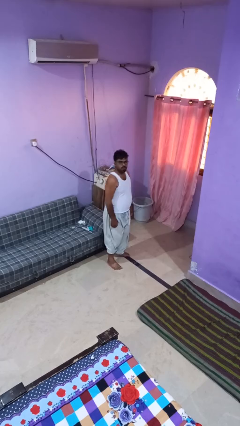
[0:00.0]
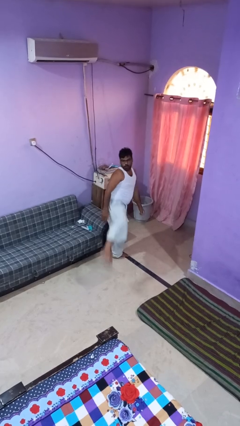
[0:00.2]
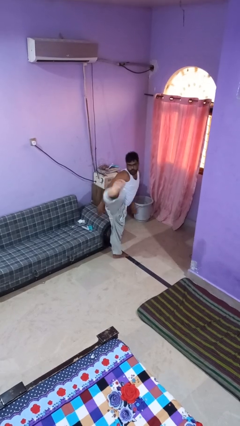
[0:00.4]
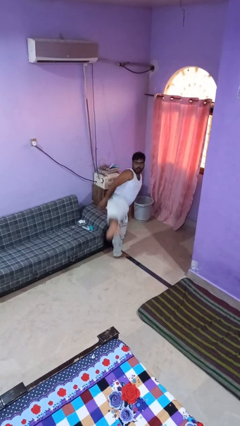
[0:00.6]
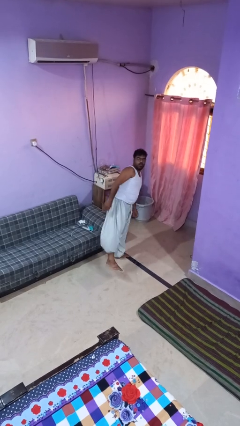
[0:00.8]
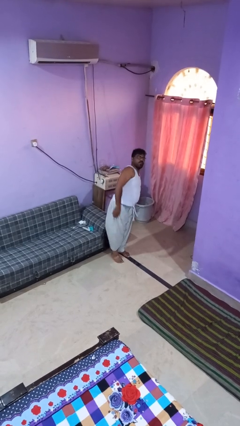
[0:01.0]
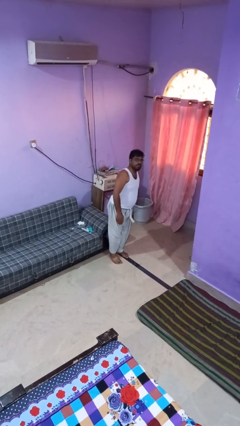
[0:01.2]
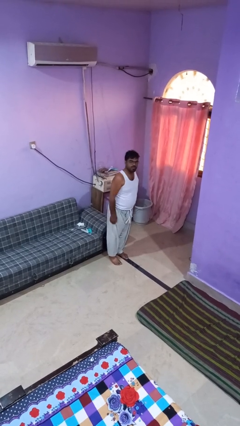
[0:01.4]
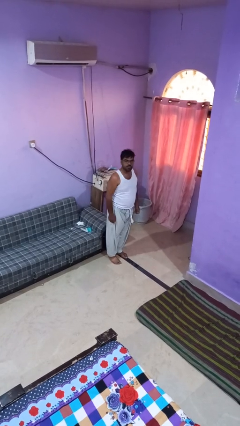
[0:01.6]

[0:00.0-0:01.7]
person karate kicks

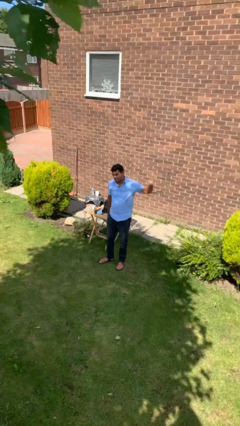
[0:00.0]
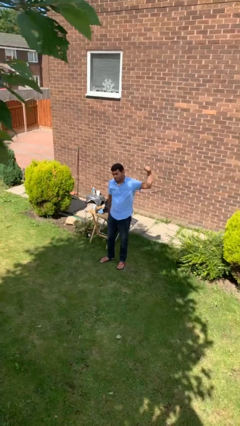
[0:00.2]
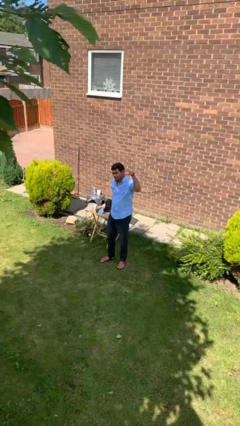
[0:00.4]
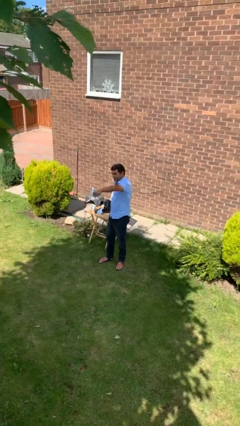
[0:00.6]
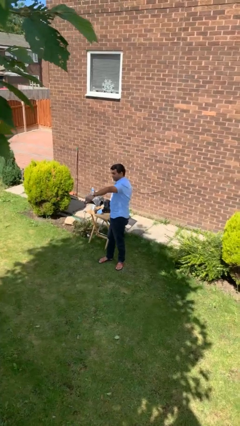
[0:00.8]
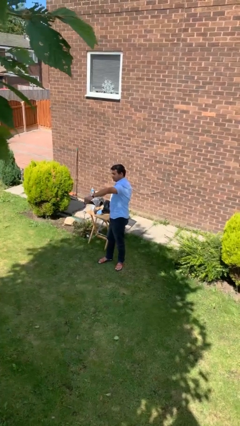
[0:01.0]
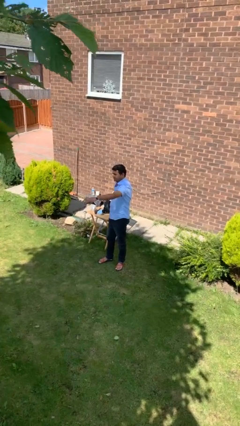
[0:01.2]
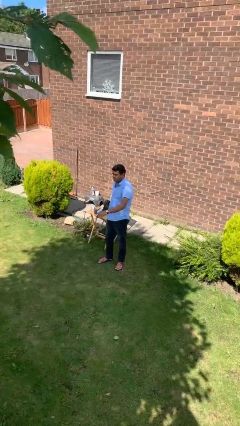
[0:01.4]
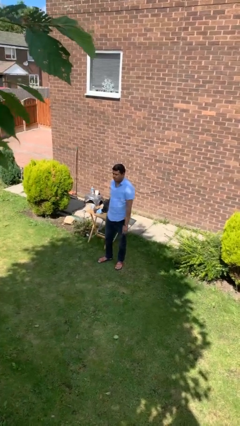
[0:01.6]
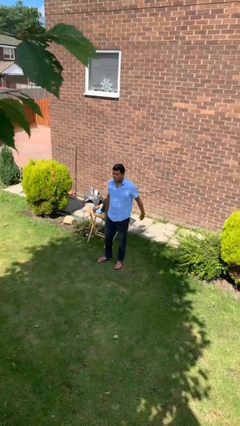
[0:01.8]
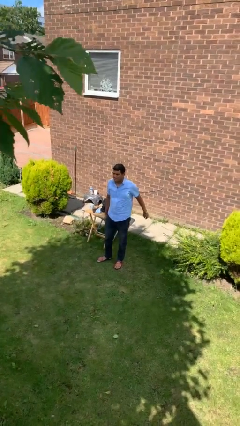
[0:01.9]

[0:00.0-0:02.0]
person punches

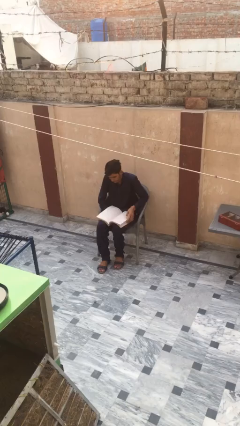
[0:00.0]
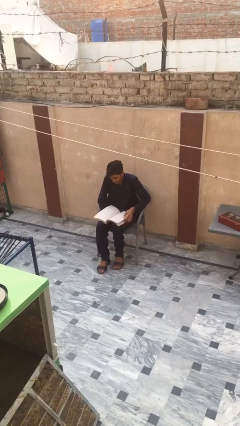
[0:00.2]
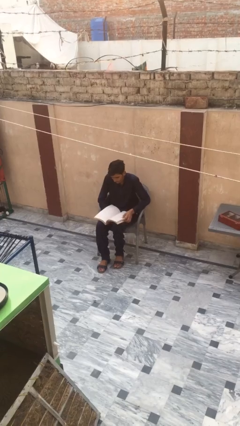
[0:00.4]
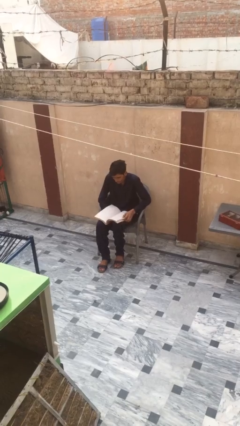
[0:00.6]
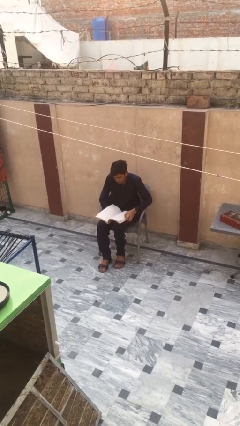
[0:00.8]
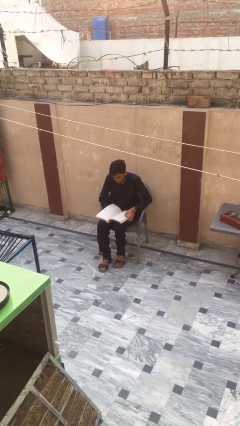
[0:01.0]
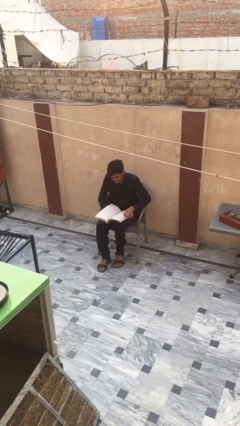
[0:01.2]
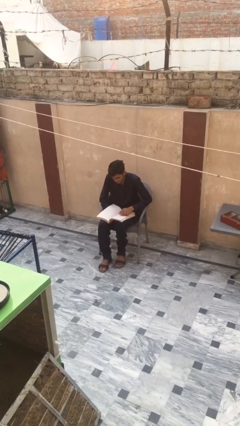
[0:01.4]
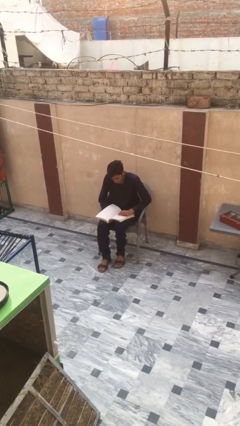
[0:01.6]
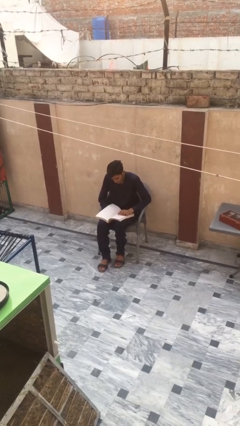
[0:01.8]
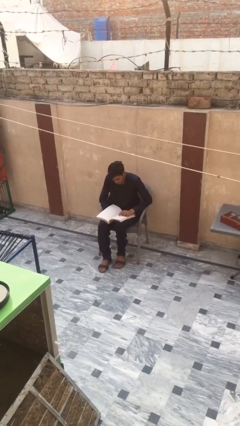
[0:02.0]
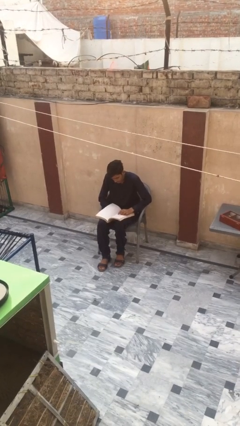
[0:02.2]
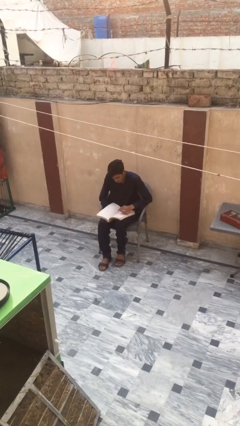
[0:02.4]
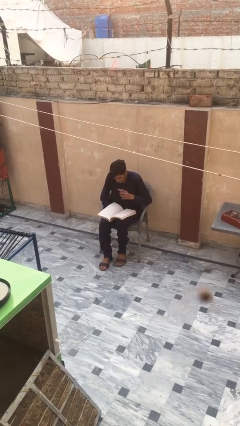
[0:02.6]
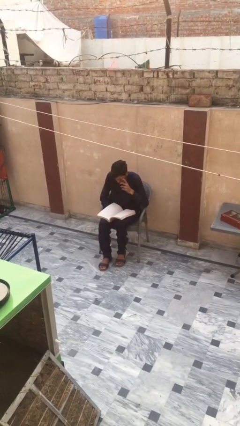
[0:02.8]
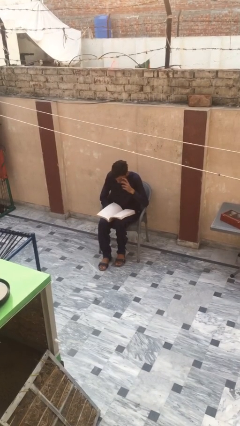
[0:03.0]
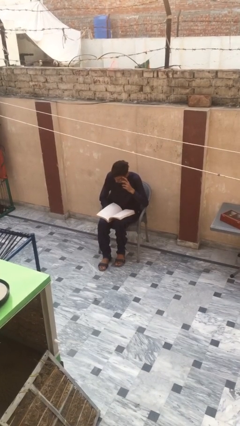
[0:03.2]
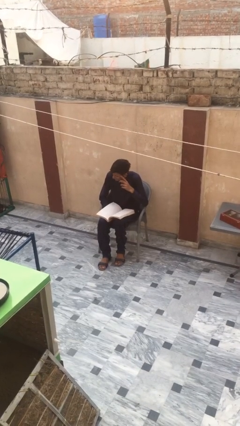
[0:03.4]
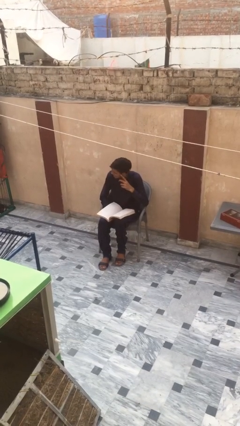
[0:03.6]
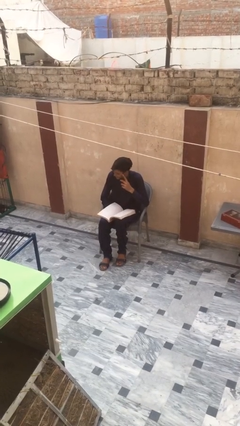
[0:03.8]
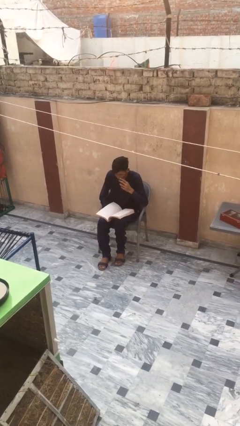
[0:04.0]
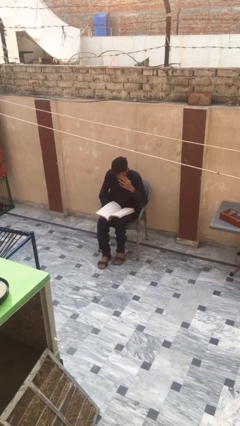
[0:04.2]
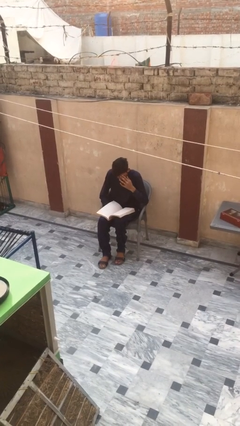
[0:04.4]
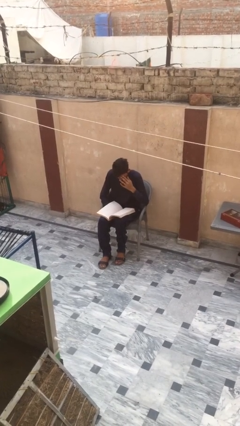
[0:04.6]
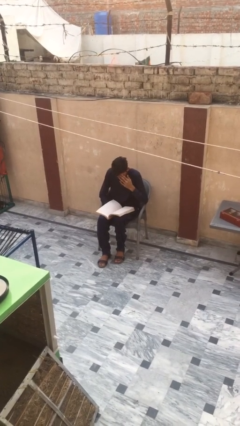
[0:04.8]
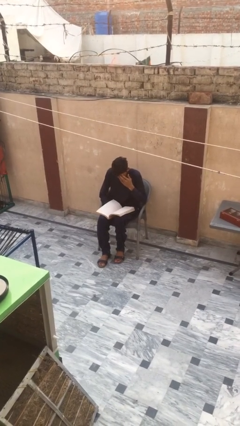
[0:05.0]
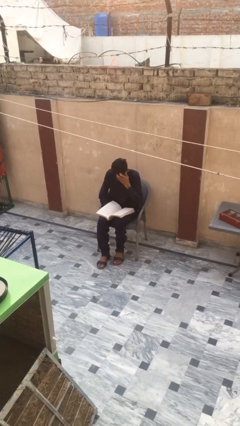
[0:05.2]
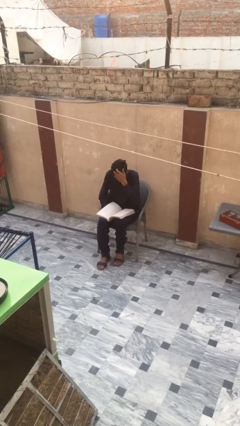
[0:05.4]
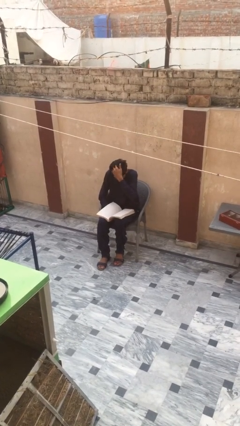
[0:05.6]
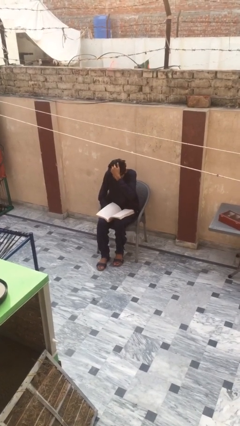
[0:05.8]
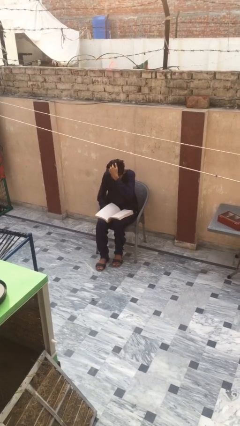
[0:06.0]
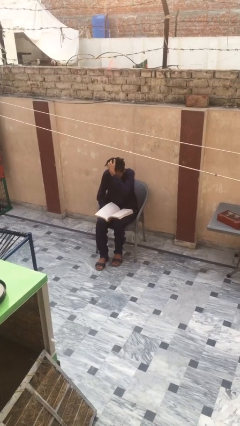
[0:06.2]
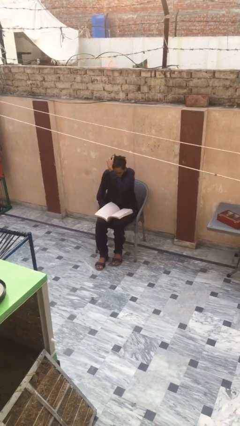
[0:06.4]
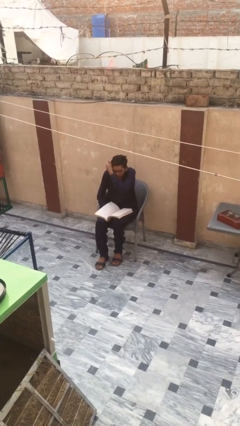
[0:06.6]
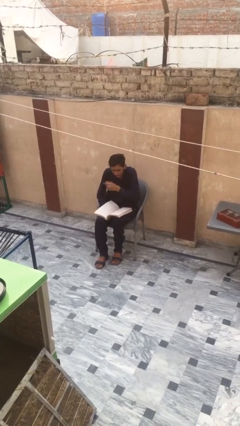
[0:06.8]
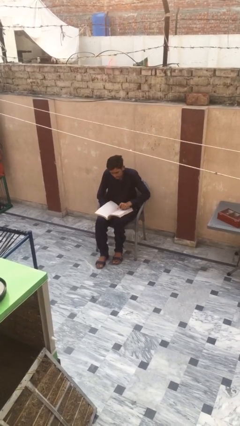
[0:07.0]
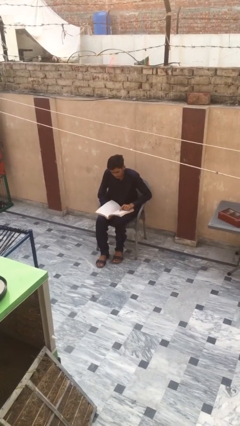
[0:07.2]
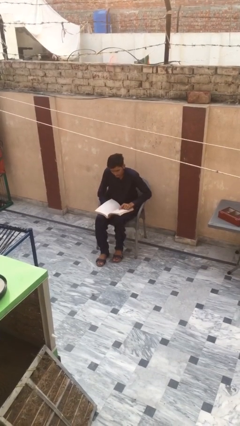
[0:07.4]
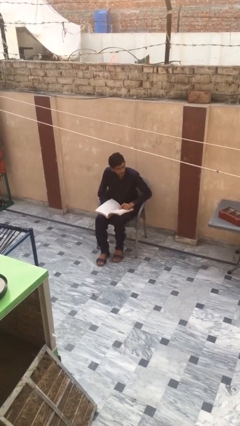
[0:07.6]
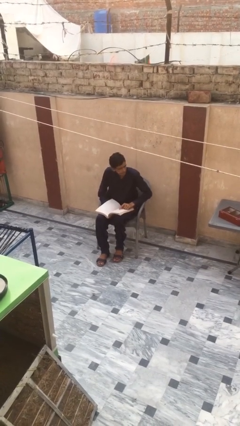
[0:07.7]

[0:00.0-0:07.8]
person reads document

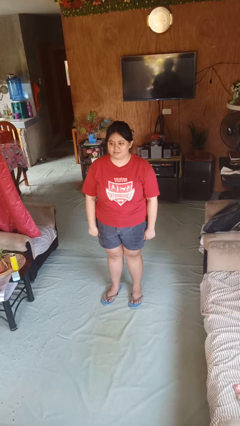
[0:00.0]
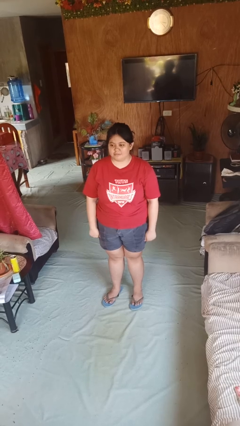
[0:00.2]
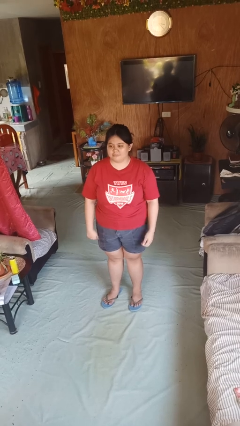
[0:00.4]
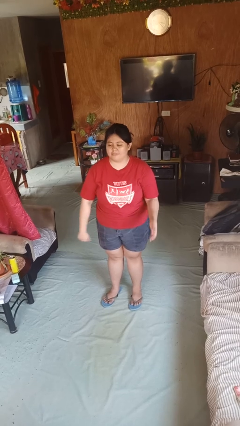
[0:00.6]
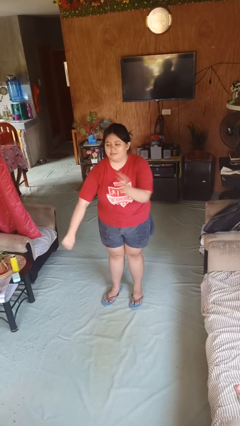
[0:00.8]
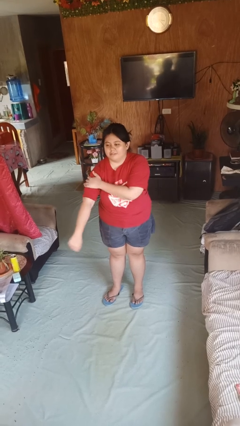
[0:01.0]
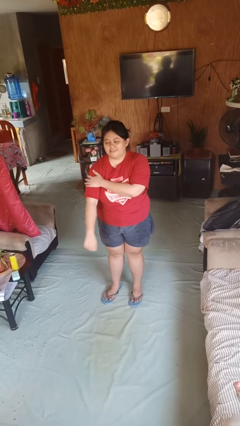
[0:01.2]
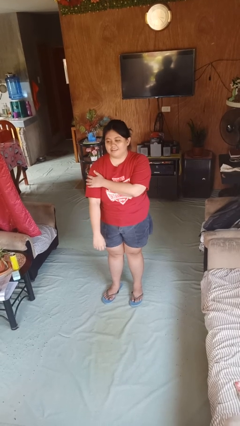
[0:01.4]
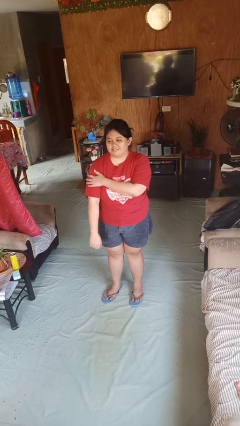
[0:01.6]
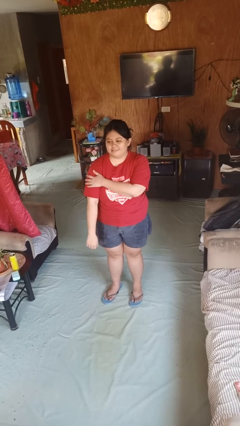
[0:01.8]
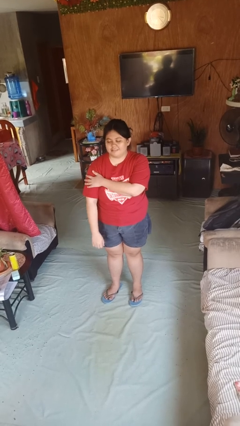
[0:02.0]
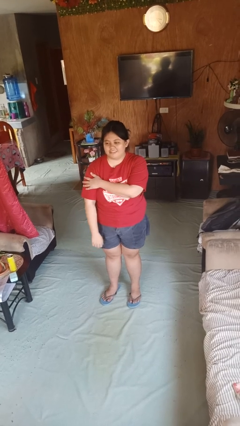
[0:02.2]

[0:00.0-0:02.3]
person swats bug

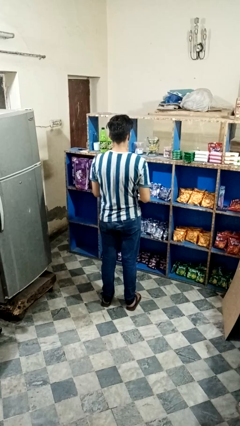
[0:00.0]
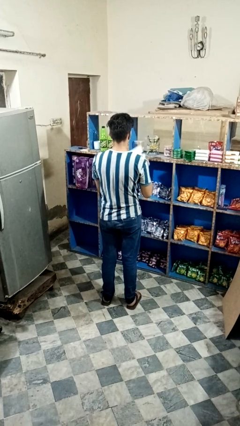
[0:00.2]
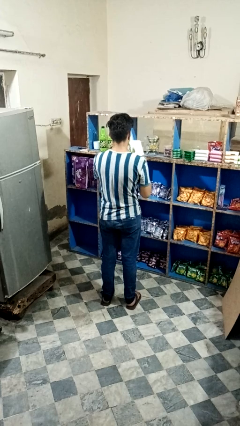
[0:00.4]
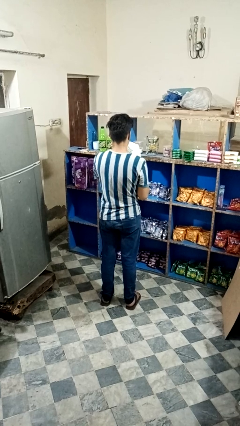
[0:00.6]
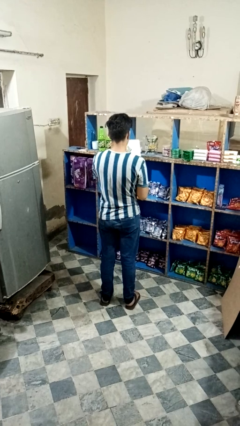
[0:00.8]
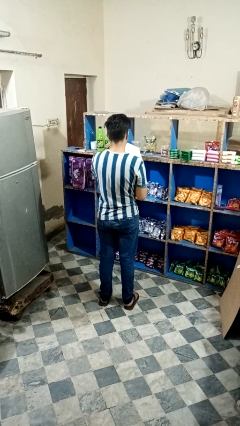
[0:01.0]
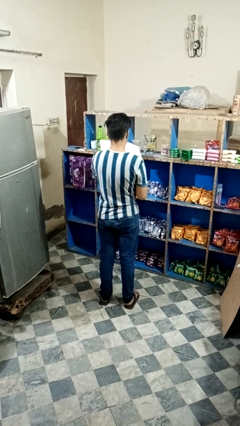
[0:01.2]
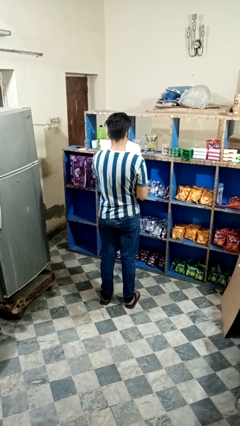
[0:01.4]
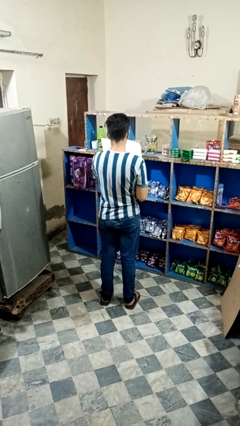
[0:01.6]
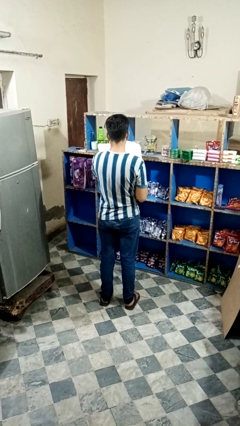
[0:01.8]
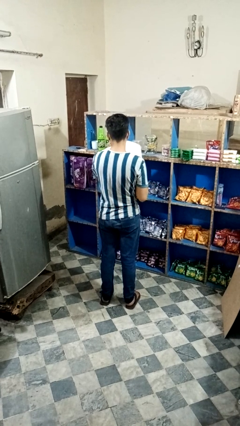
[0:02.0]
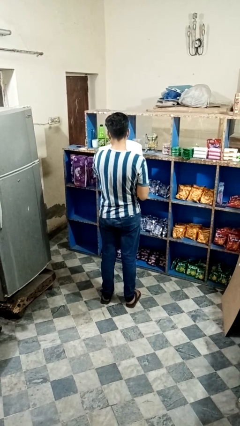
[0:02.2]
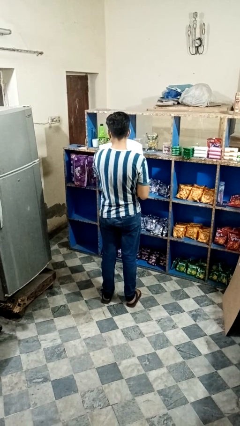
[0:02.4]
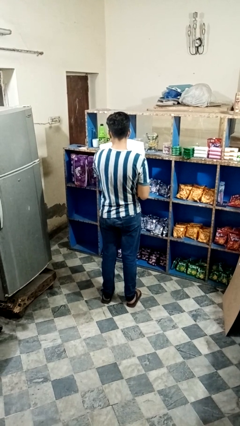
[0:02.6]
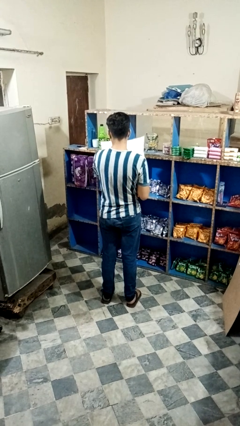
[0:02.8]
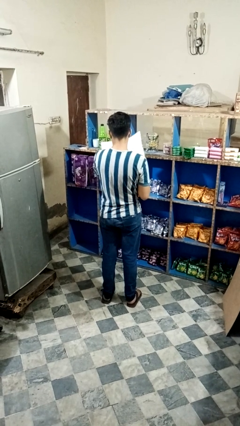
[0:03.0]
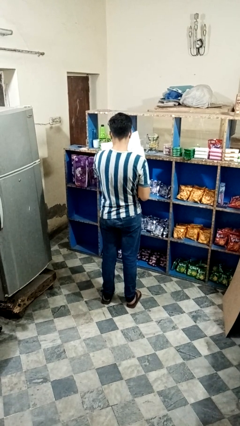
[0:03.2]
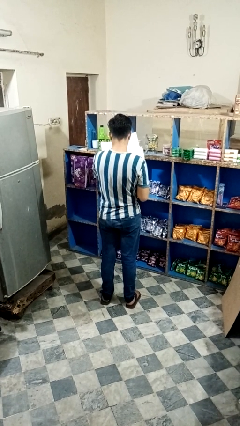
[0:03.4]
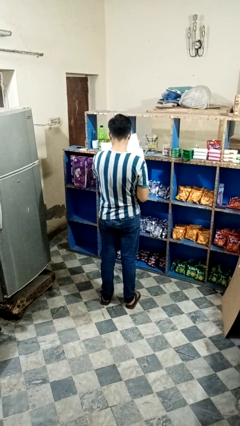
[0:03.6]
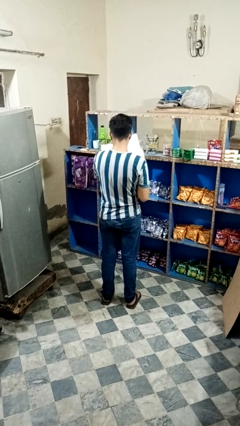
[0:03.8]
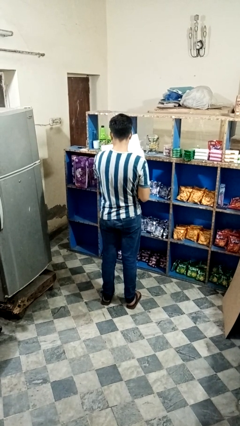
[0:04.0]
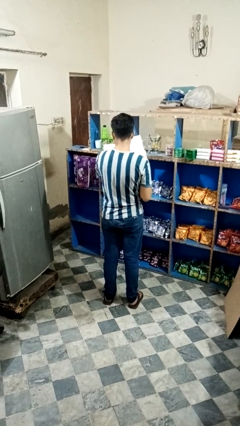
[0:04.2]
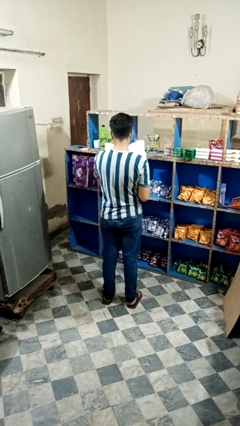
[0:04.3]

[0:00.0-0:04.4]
person reads magazine
